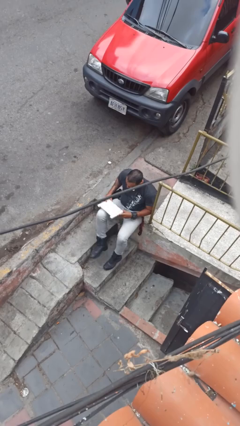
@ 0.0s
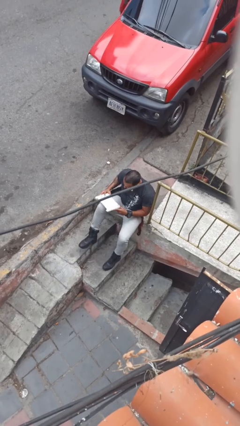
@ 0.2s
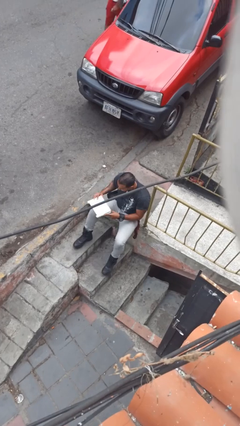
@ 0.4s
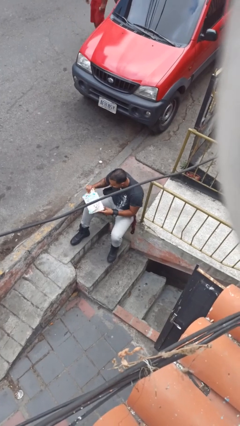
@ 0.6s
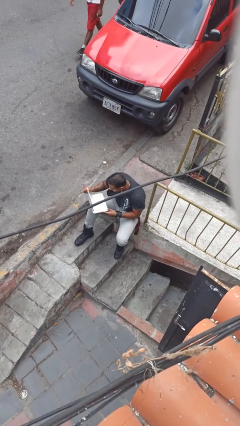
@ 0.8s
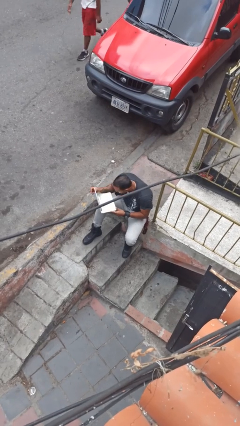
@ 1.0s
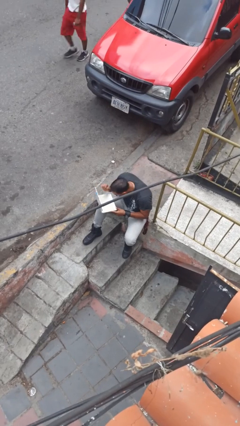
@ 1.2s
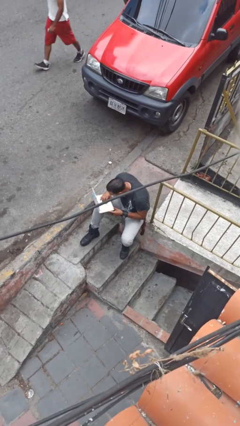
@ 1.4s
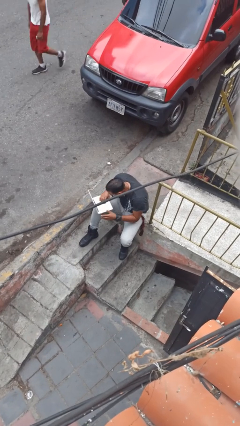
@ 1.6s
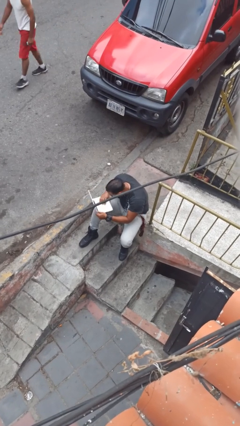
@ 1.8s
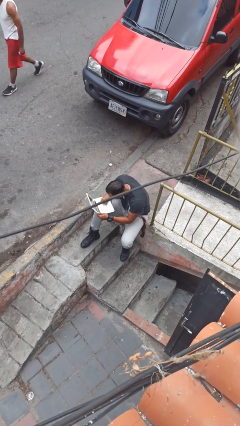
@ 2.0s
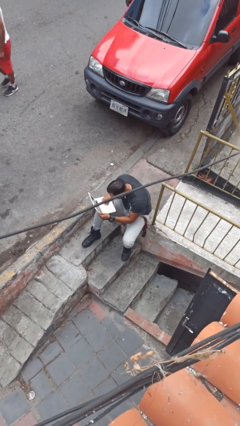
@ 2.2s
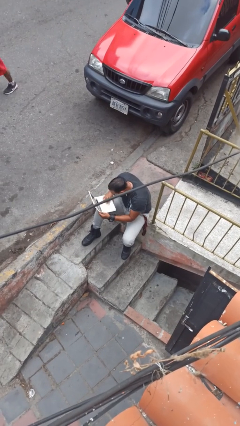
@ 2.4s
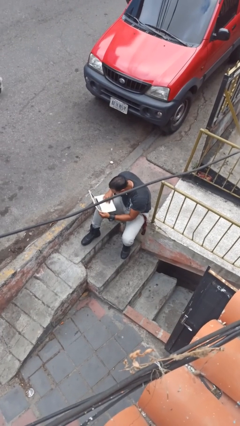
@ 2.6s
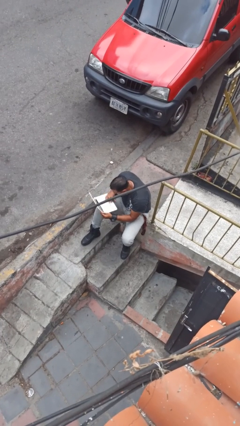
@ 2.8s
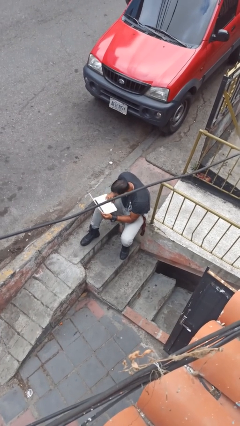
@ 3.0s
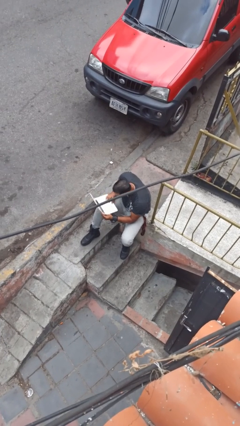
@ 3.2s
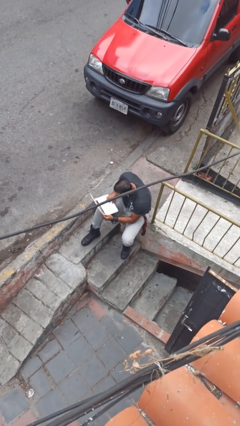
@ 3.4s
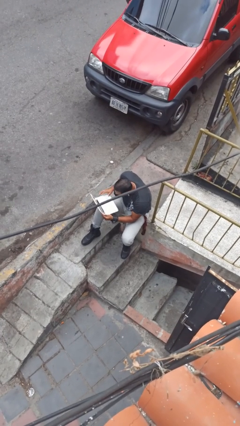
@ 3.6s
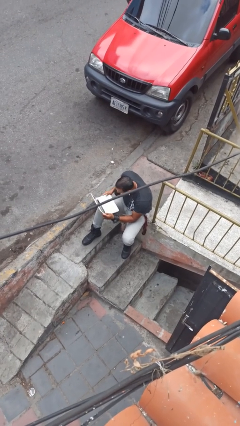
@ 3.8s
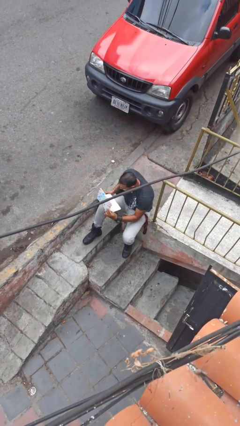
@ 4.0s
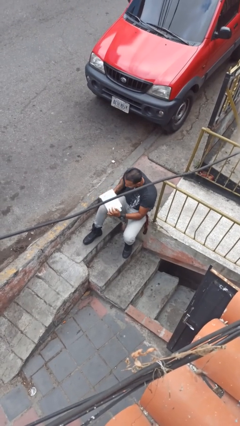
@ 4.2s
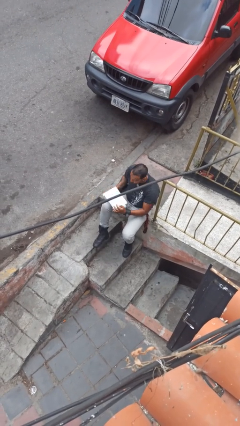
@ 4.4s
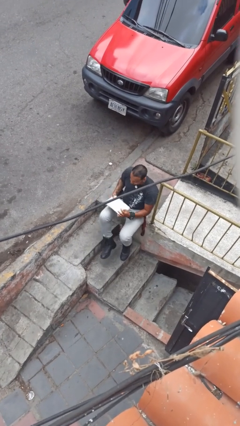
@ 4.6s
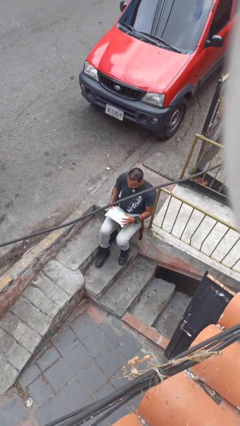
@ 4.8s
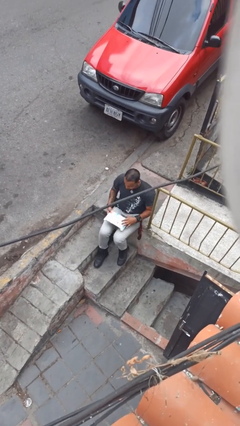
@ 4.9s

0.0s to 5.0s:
person interacts with laptop

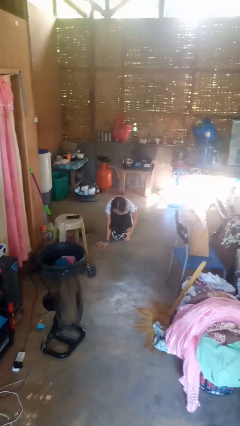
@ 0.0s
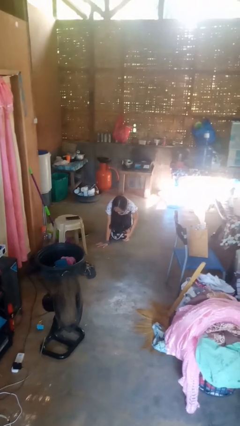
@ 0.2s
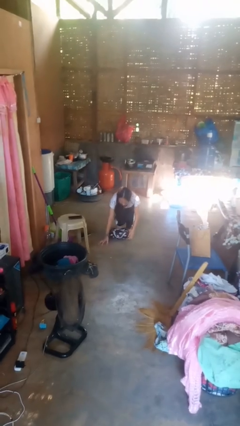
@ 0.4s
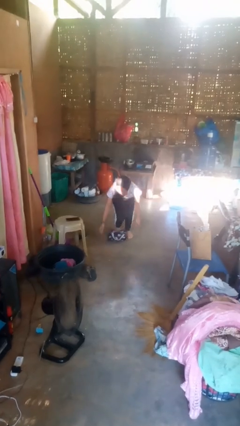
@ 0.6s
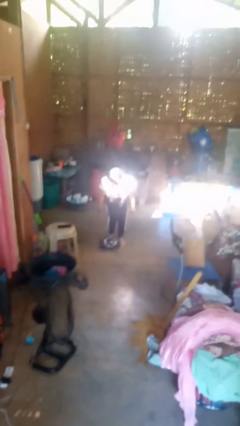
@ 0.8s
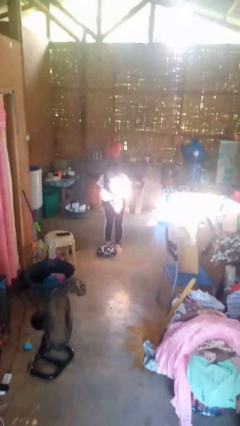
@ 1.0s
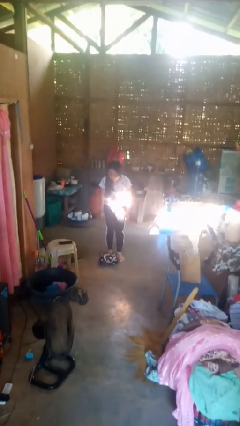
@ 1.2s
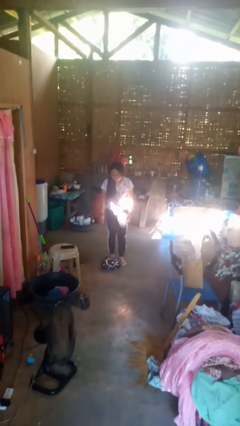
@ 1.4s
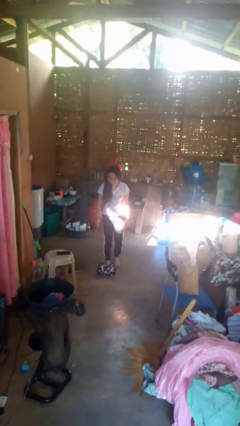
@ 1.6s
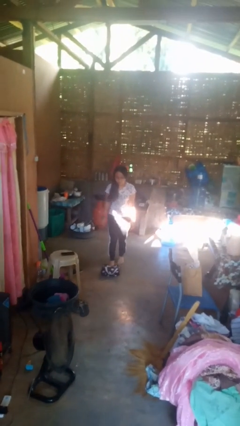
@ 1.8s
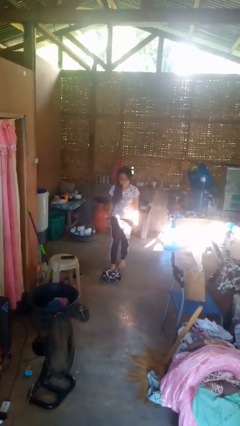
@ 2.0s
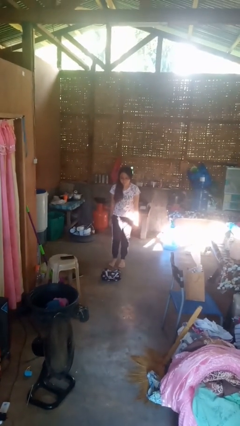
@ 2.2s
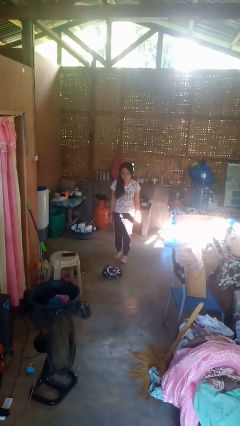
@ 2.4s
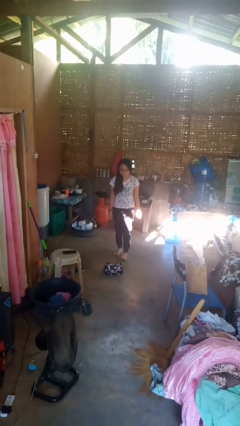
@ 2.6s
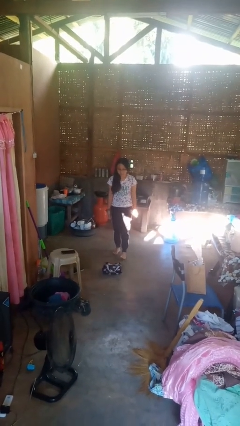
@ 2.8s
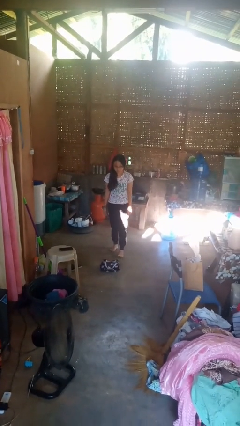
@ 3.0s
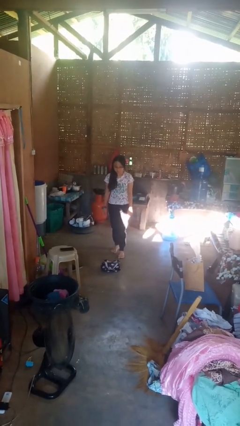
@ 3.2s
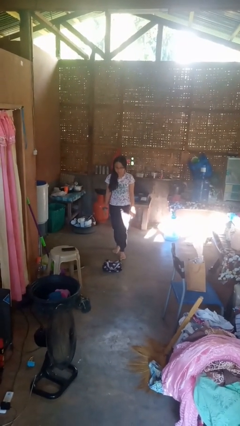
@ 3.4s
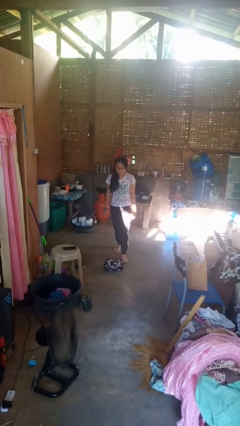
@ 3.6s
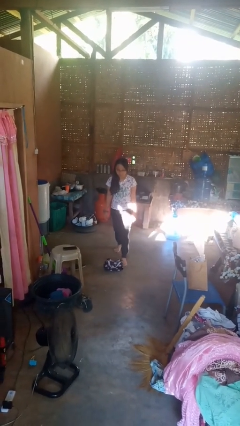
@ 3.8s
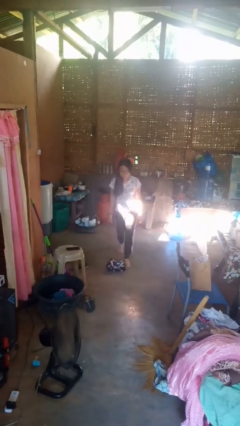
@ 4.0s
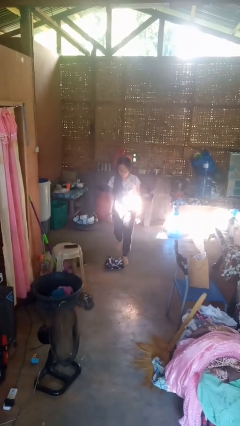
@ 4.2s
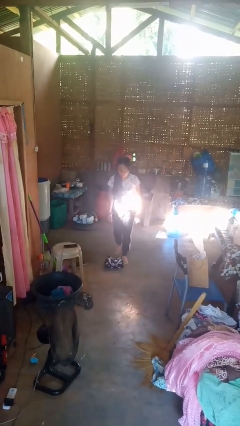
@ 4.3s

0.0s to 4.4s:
person stands up from floor

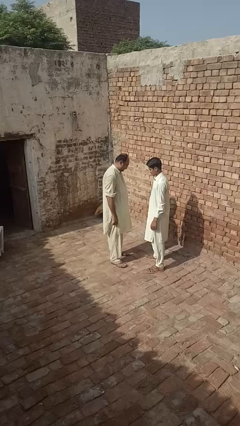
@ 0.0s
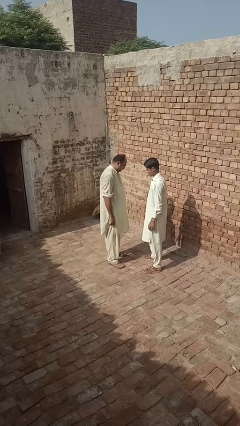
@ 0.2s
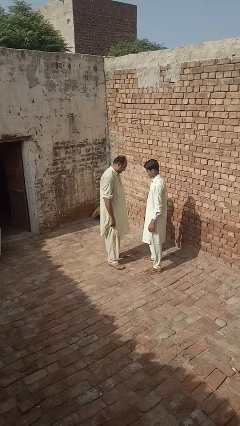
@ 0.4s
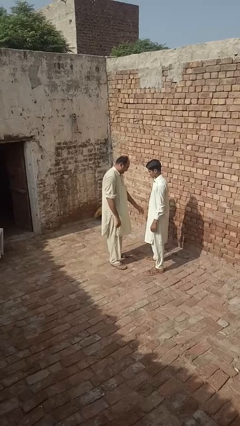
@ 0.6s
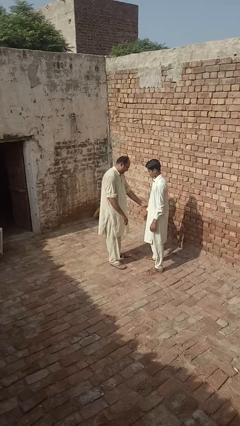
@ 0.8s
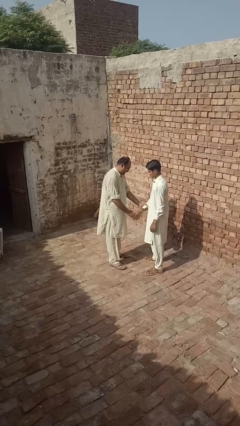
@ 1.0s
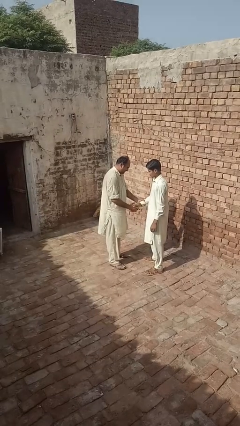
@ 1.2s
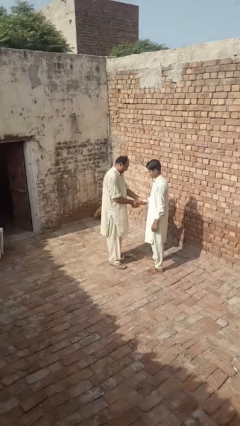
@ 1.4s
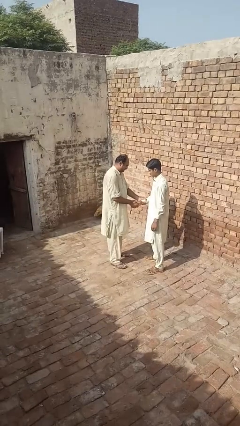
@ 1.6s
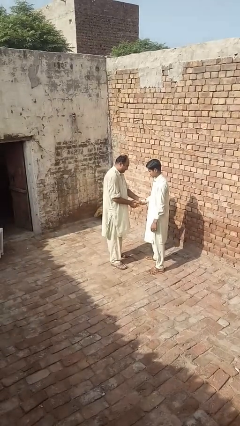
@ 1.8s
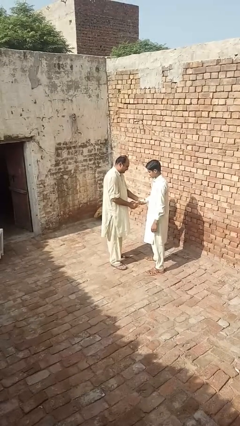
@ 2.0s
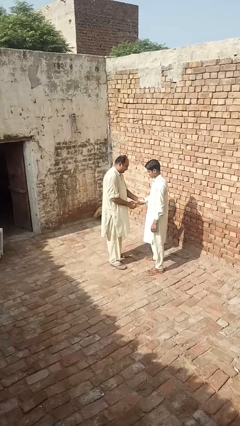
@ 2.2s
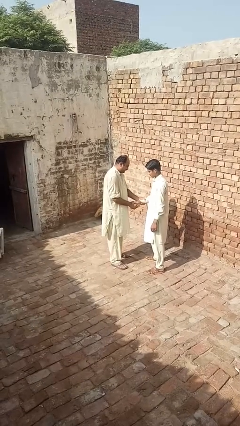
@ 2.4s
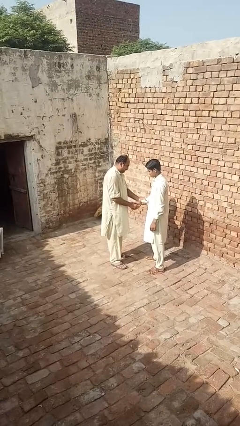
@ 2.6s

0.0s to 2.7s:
person grabs person by forearm

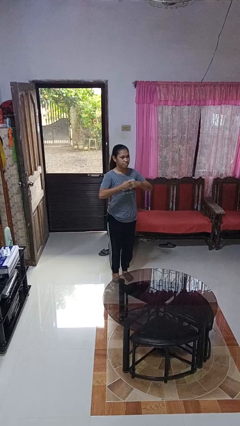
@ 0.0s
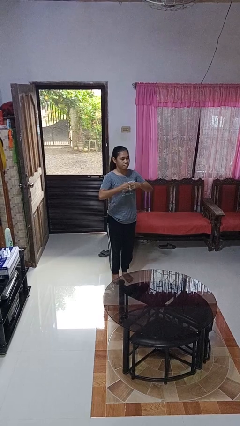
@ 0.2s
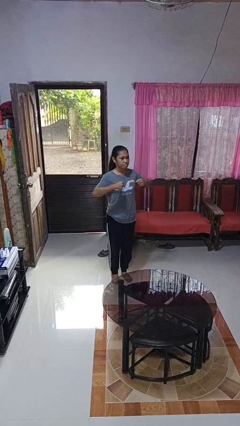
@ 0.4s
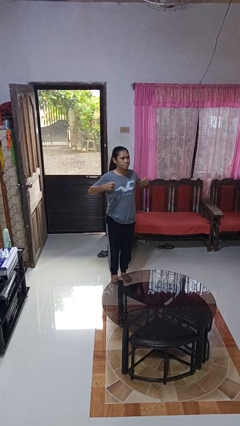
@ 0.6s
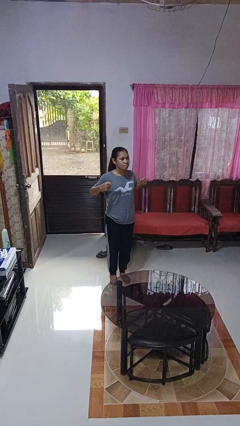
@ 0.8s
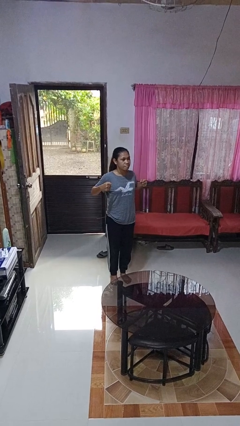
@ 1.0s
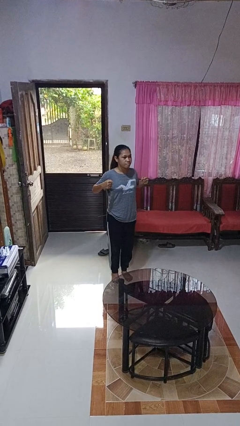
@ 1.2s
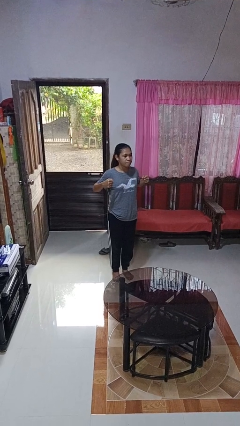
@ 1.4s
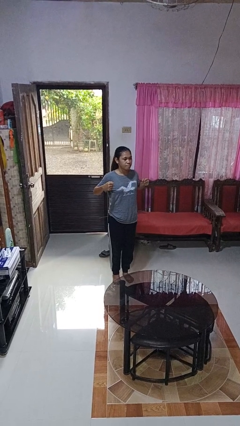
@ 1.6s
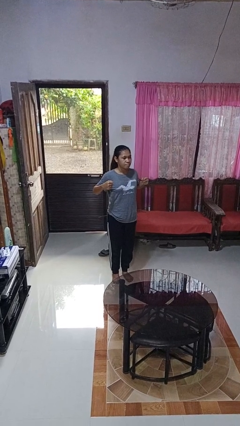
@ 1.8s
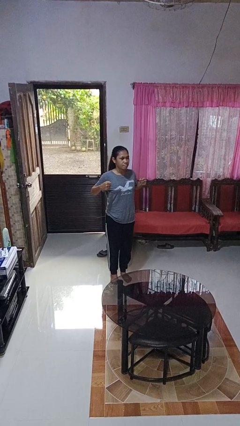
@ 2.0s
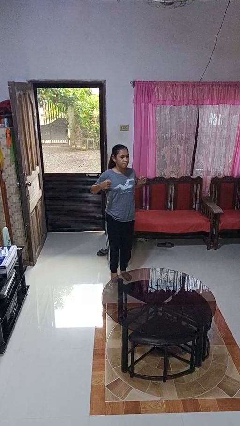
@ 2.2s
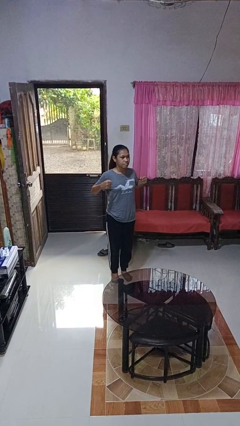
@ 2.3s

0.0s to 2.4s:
person gestures zoom in

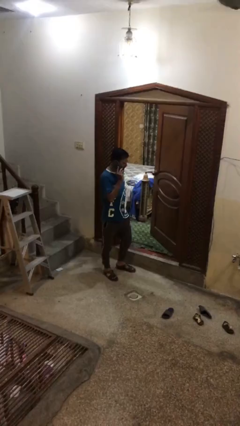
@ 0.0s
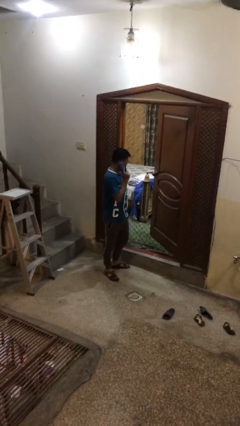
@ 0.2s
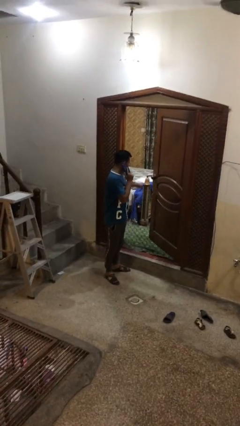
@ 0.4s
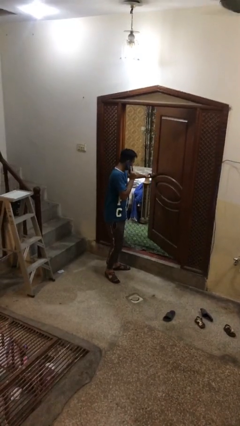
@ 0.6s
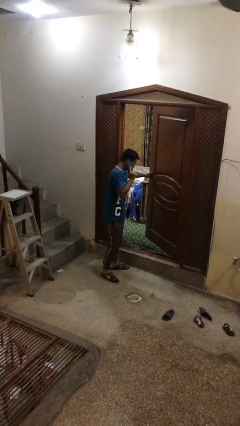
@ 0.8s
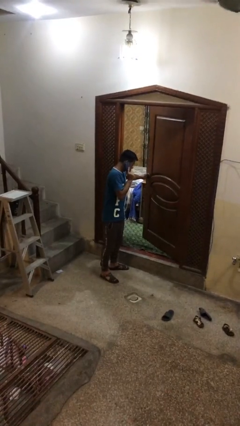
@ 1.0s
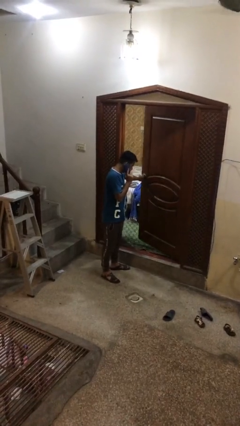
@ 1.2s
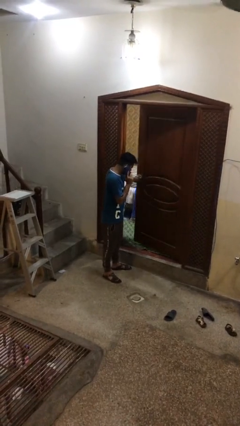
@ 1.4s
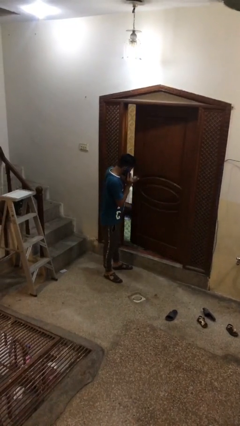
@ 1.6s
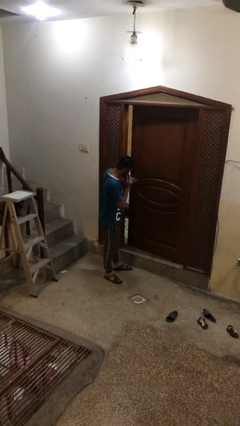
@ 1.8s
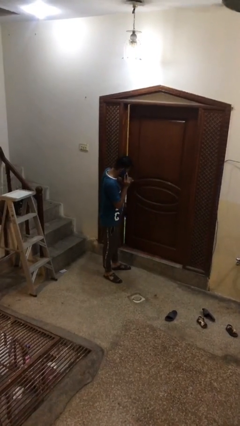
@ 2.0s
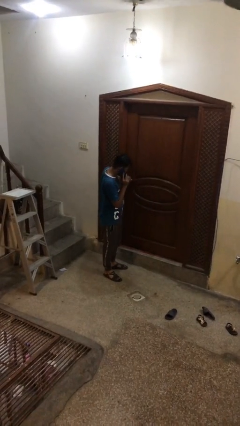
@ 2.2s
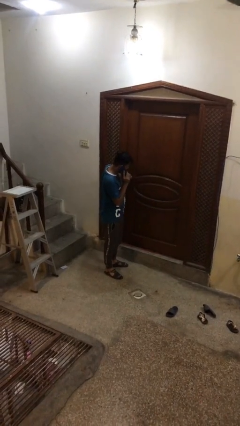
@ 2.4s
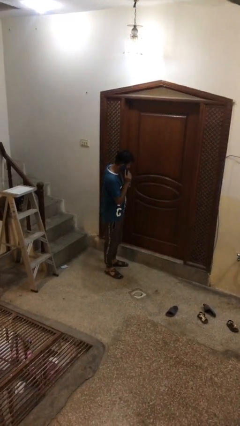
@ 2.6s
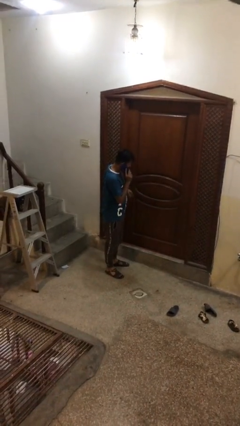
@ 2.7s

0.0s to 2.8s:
person closes facility door

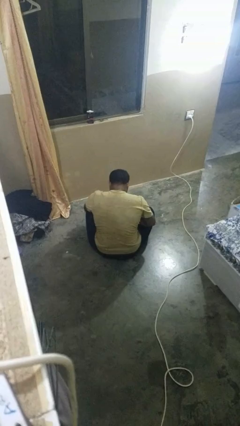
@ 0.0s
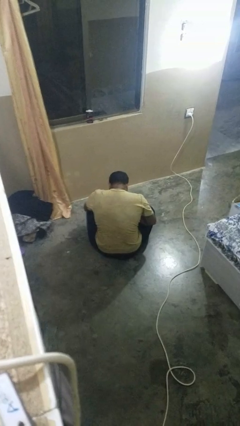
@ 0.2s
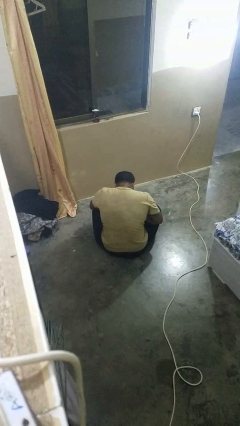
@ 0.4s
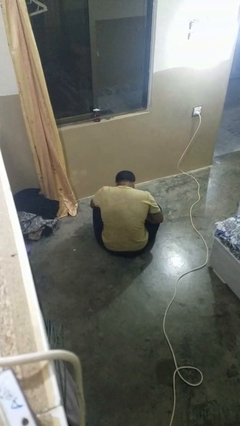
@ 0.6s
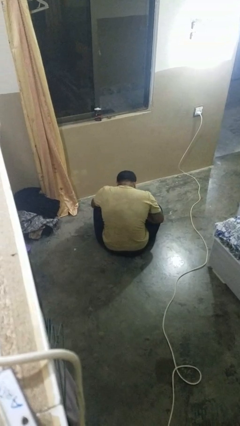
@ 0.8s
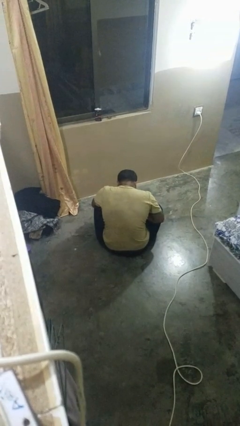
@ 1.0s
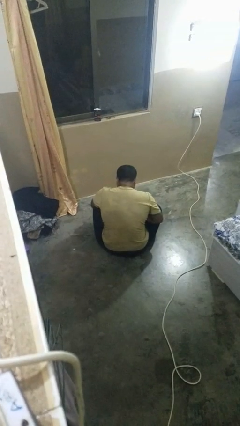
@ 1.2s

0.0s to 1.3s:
person looks at hands in lap
